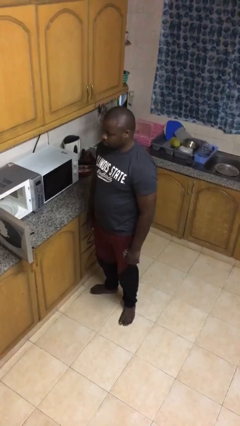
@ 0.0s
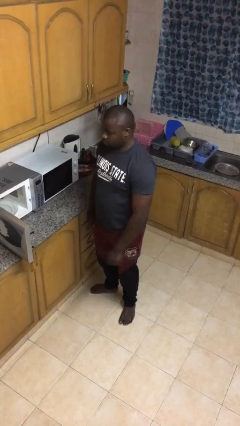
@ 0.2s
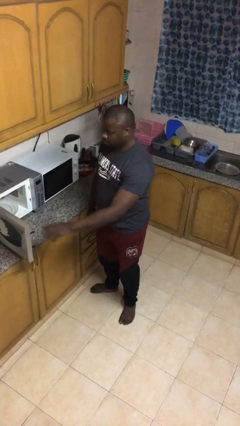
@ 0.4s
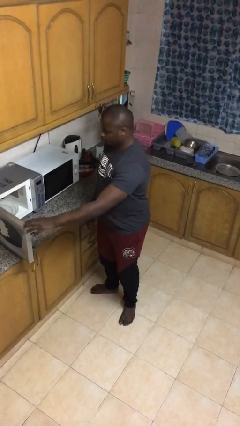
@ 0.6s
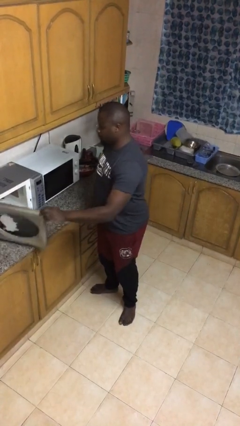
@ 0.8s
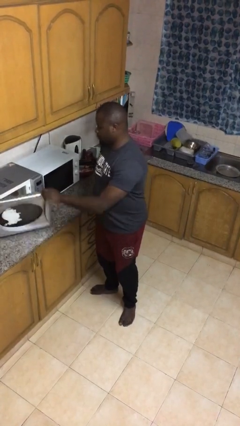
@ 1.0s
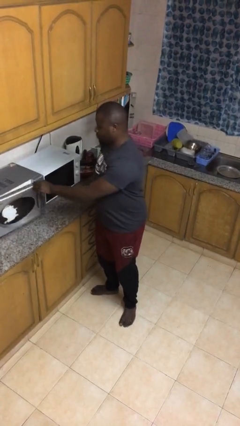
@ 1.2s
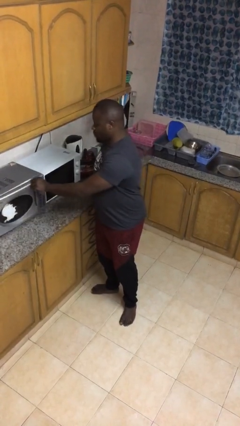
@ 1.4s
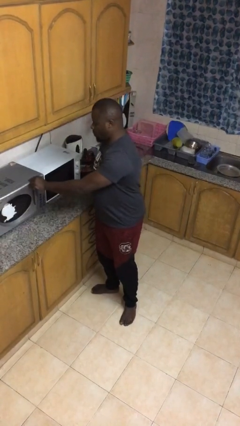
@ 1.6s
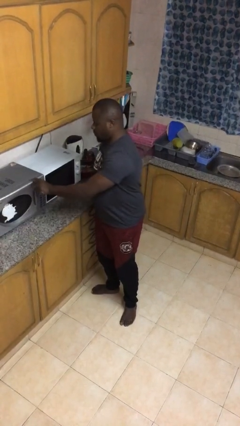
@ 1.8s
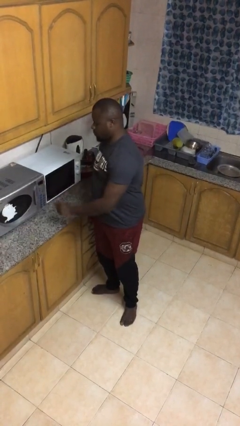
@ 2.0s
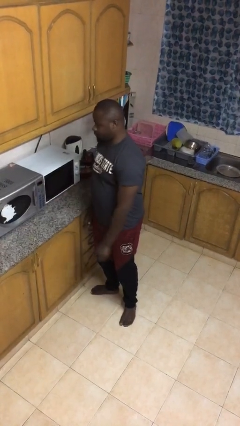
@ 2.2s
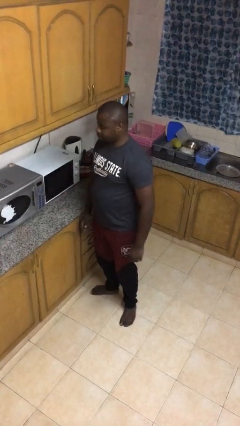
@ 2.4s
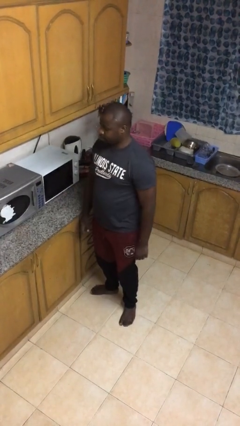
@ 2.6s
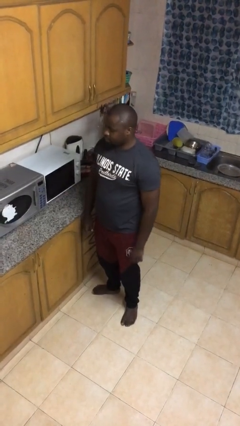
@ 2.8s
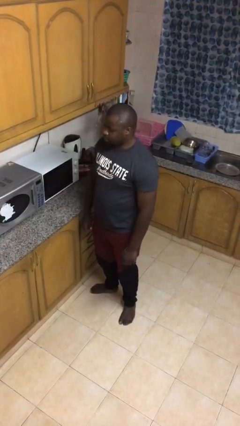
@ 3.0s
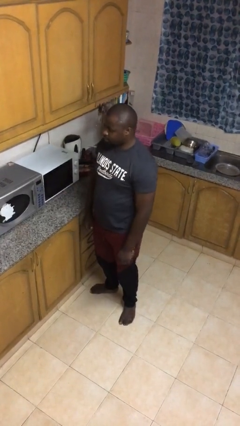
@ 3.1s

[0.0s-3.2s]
person closes microwave

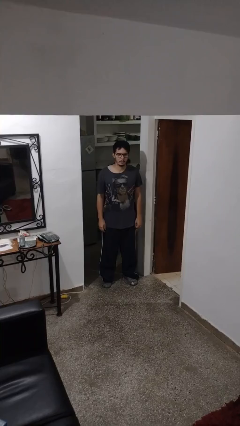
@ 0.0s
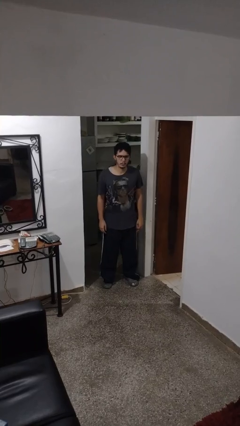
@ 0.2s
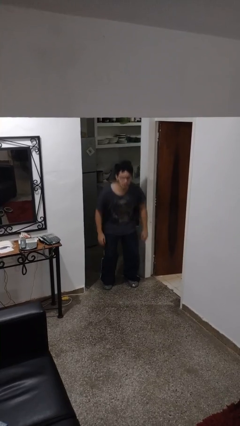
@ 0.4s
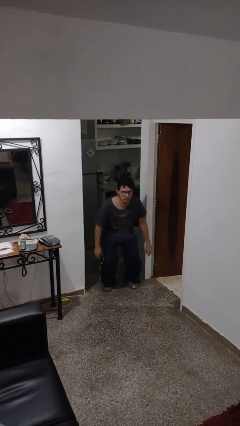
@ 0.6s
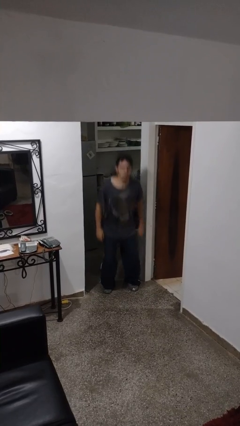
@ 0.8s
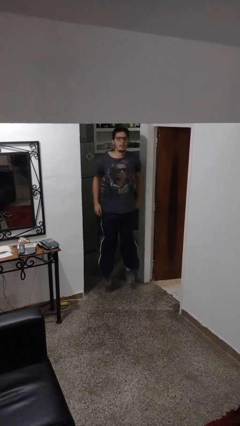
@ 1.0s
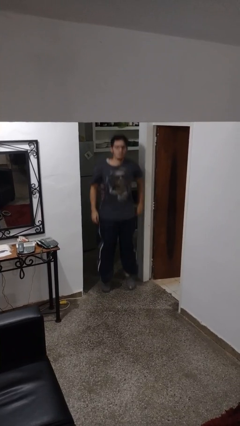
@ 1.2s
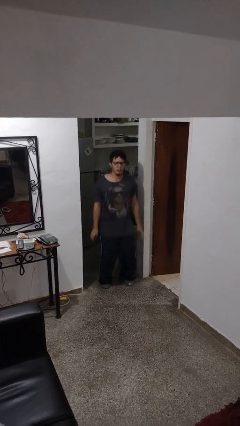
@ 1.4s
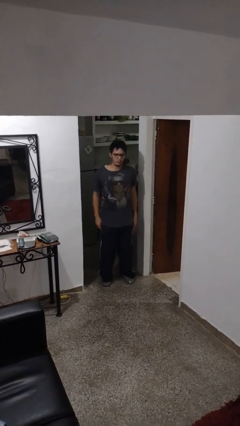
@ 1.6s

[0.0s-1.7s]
person jumps

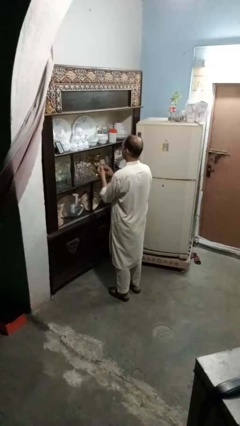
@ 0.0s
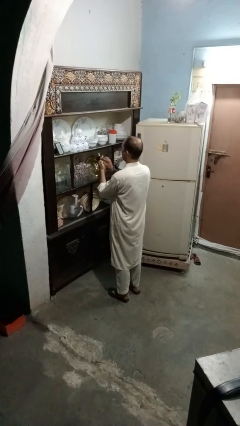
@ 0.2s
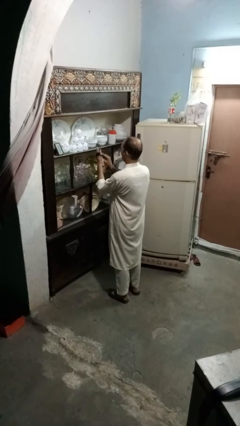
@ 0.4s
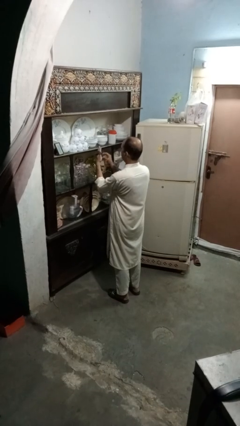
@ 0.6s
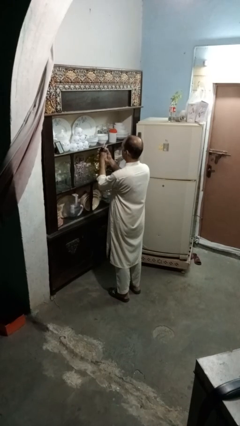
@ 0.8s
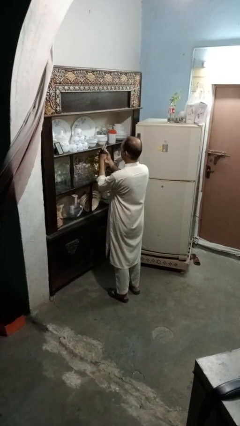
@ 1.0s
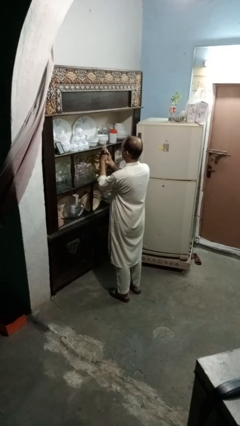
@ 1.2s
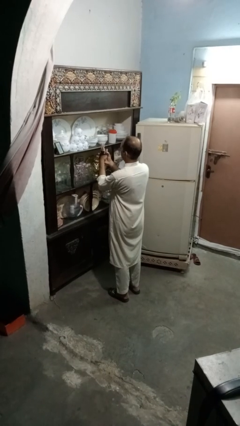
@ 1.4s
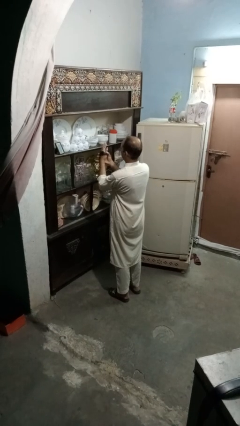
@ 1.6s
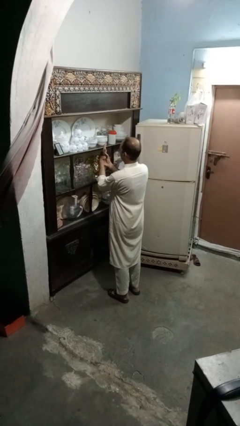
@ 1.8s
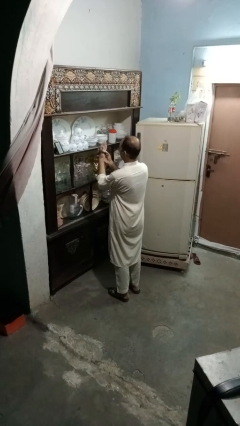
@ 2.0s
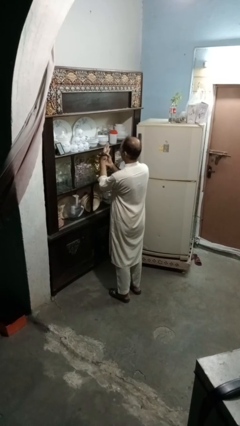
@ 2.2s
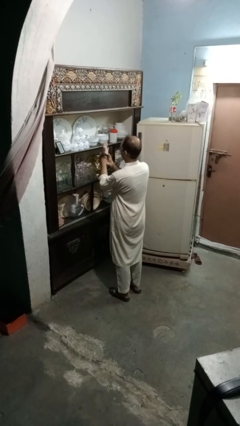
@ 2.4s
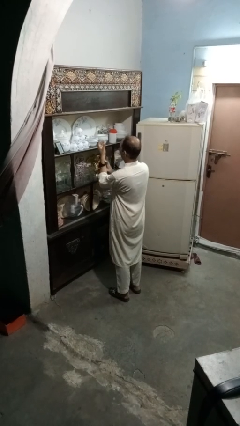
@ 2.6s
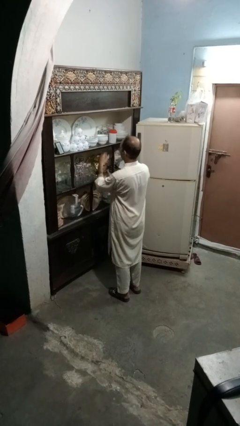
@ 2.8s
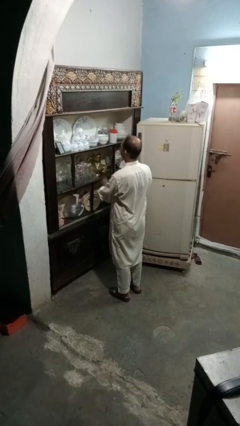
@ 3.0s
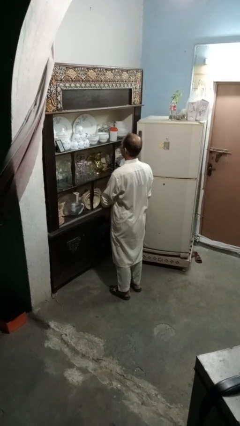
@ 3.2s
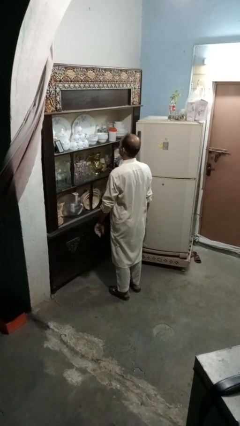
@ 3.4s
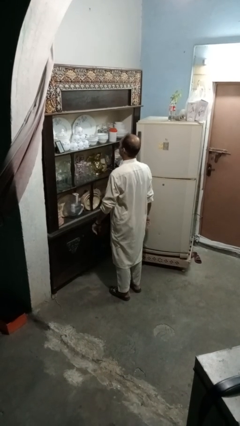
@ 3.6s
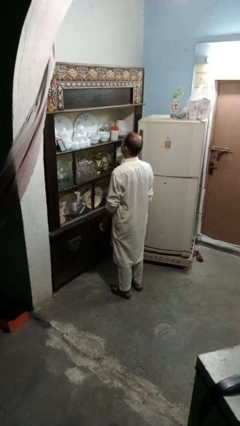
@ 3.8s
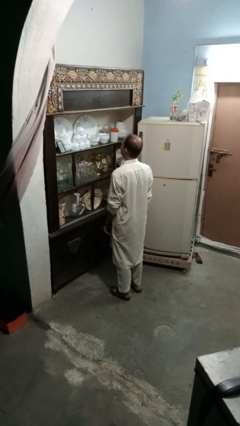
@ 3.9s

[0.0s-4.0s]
person puts on wristwatch

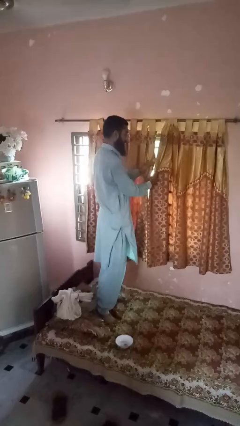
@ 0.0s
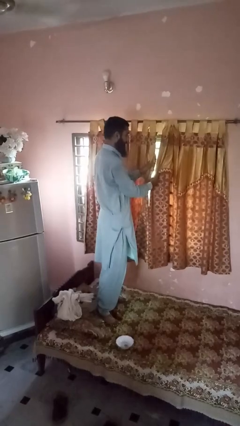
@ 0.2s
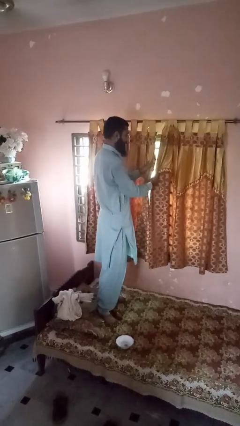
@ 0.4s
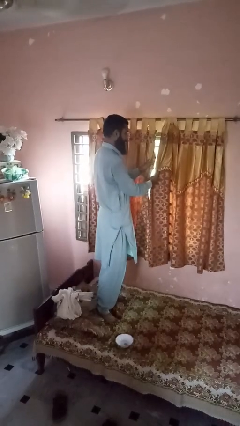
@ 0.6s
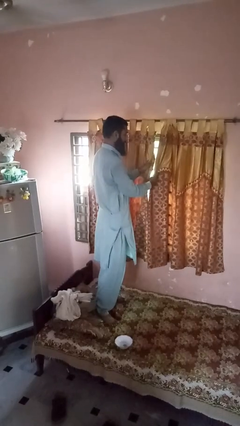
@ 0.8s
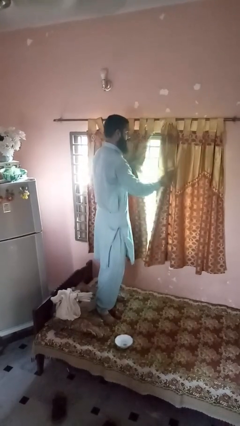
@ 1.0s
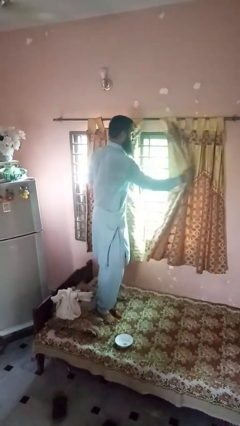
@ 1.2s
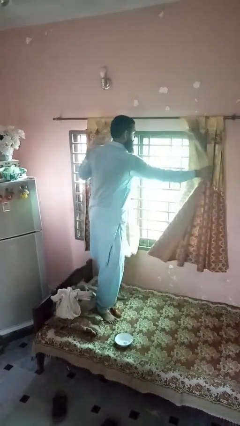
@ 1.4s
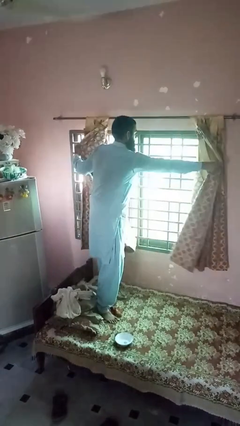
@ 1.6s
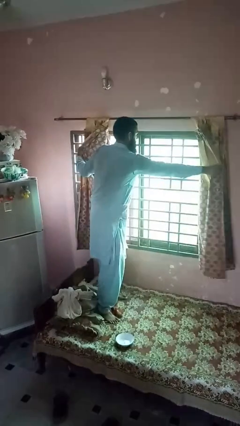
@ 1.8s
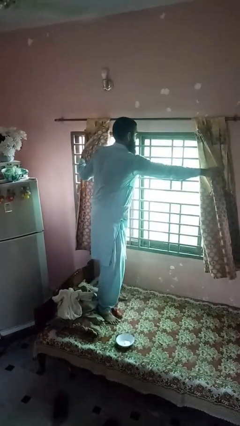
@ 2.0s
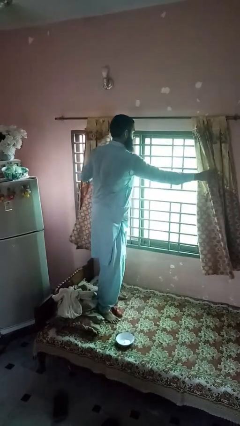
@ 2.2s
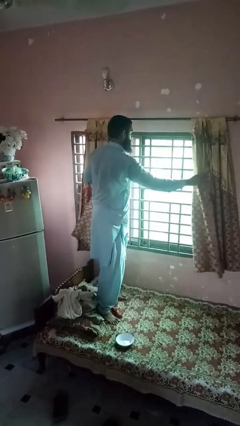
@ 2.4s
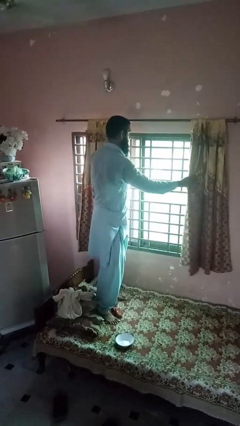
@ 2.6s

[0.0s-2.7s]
person opens curtains

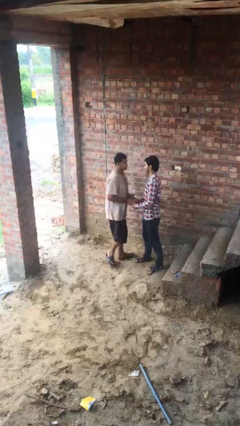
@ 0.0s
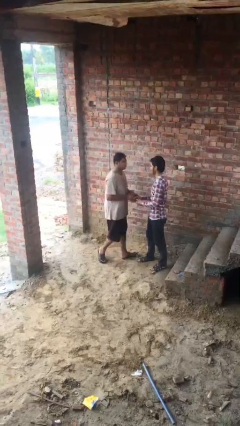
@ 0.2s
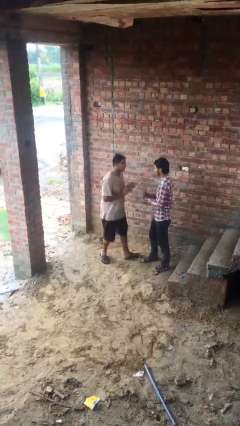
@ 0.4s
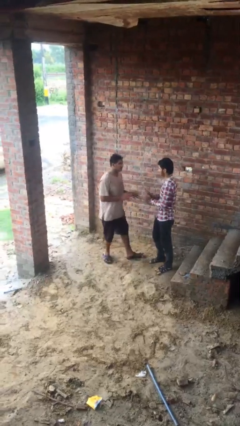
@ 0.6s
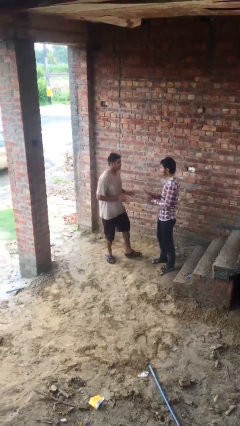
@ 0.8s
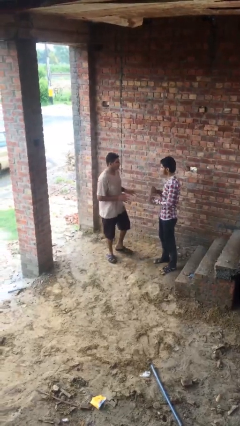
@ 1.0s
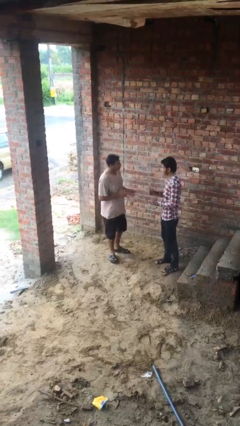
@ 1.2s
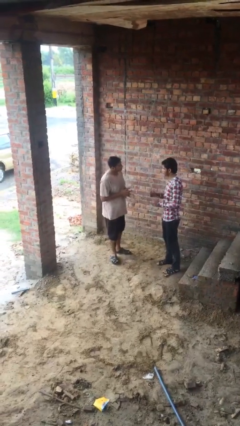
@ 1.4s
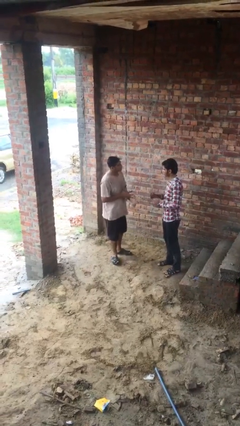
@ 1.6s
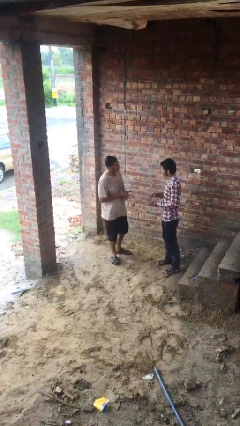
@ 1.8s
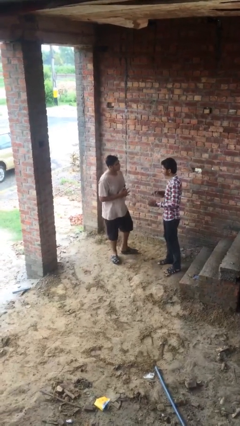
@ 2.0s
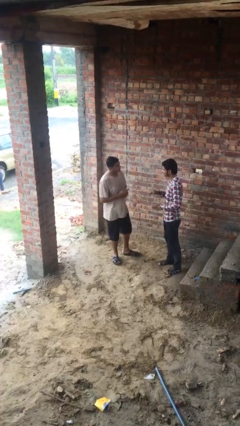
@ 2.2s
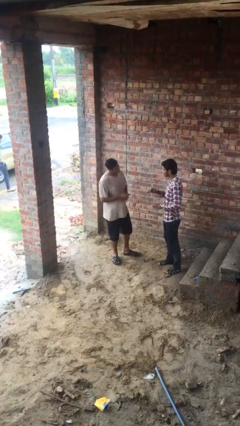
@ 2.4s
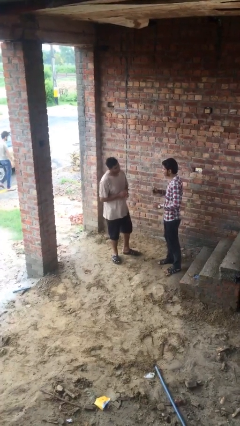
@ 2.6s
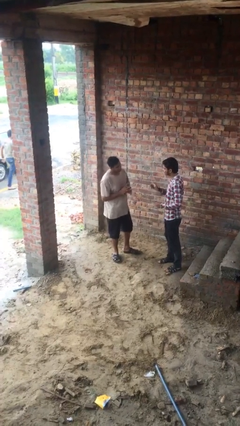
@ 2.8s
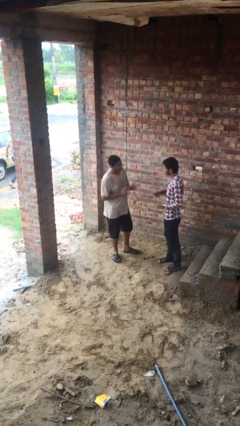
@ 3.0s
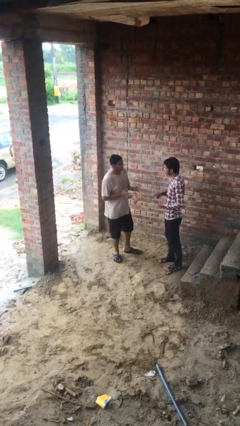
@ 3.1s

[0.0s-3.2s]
person talks to person

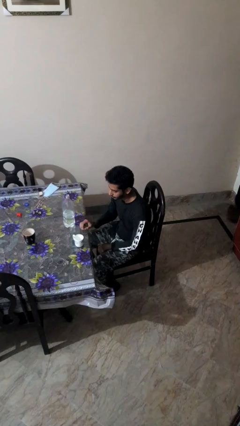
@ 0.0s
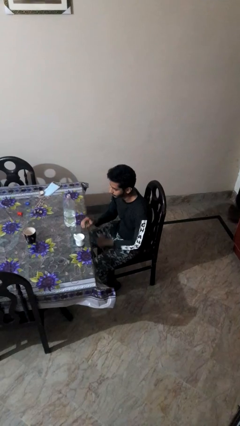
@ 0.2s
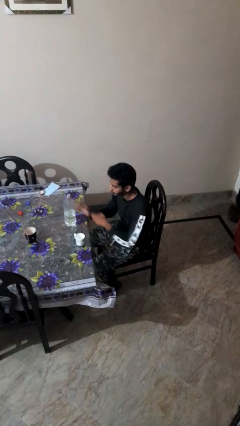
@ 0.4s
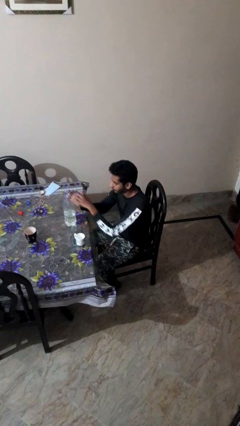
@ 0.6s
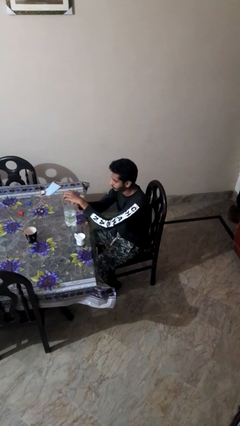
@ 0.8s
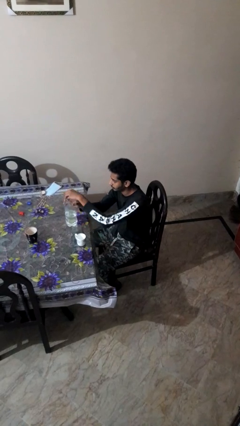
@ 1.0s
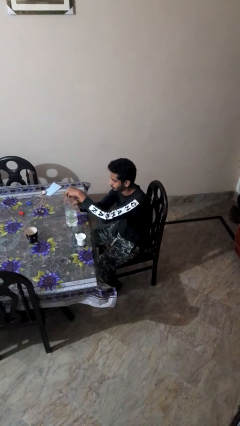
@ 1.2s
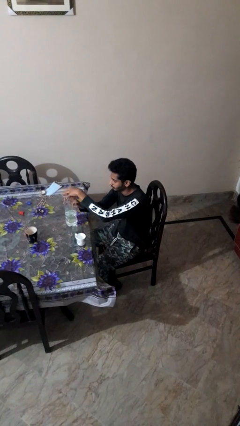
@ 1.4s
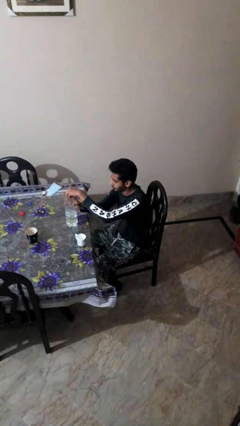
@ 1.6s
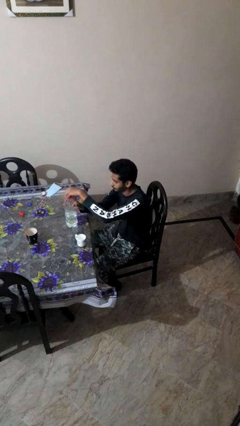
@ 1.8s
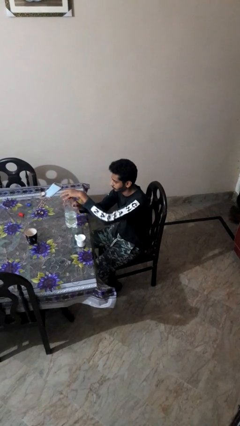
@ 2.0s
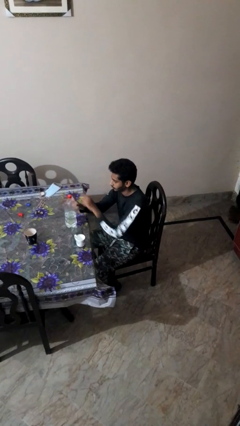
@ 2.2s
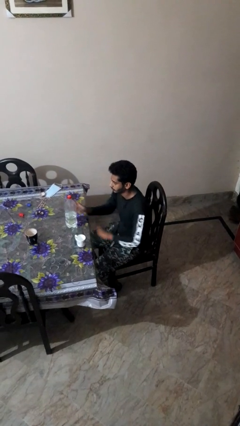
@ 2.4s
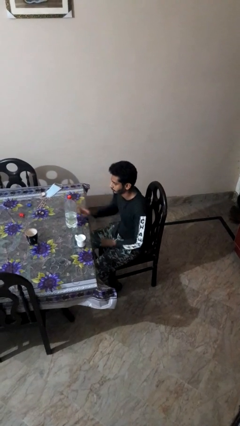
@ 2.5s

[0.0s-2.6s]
person screws lid to bottle
